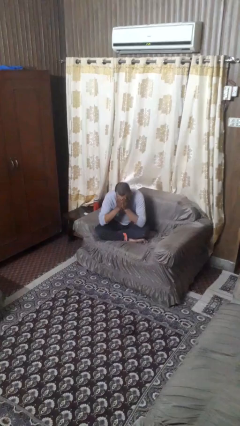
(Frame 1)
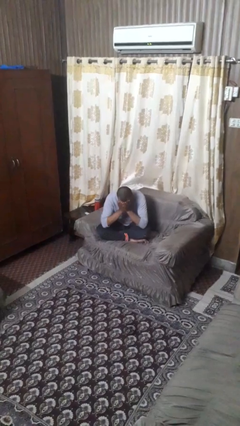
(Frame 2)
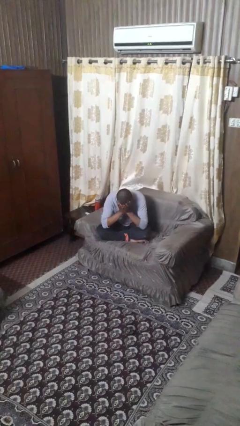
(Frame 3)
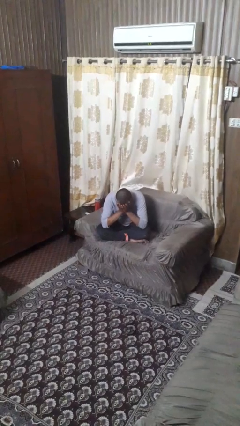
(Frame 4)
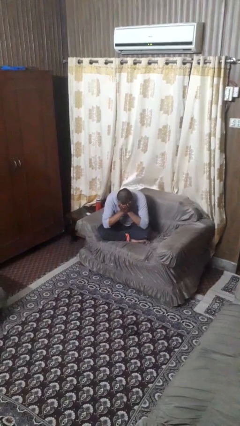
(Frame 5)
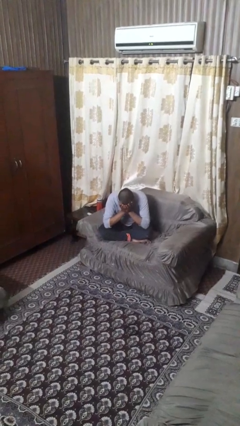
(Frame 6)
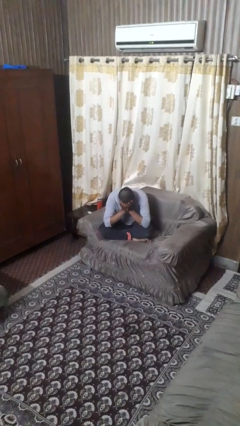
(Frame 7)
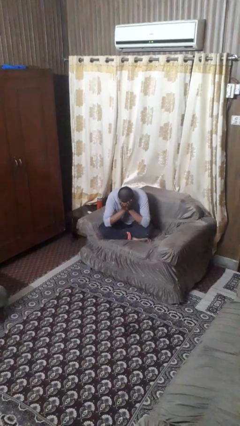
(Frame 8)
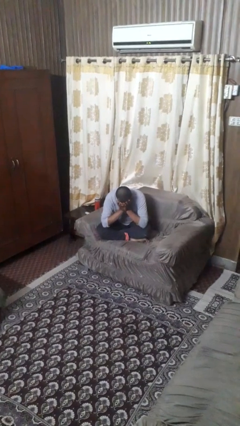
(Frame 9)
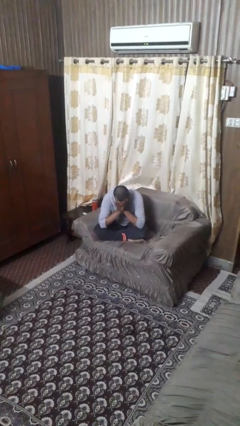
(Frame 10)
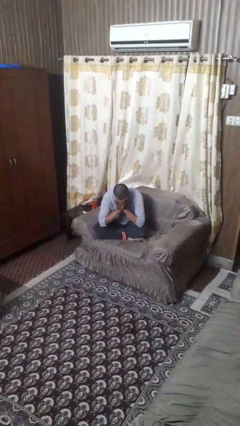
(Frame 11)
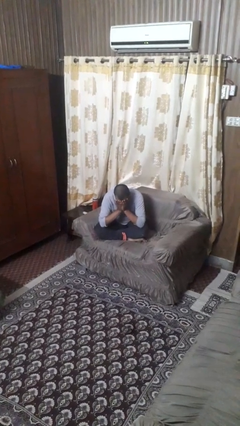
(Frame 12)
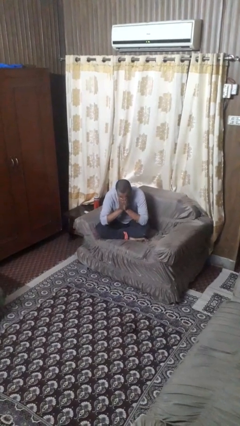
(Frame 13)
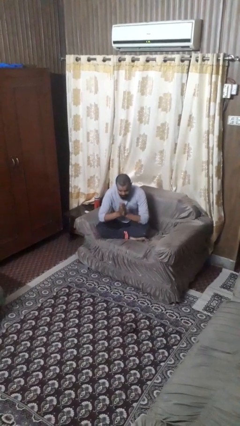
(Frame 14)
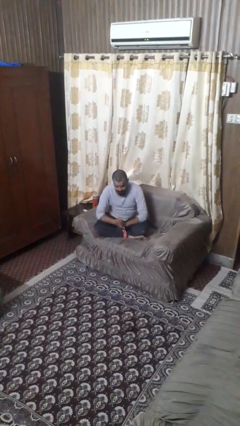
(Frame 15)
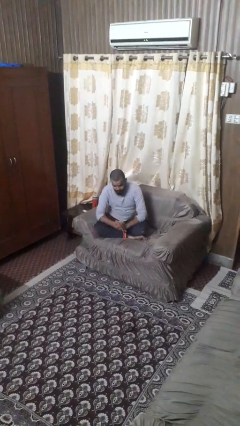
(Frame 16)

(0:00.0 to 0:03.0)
person covers face with hands

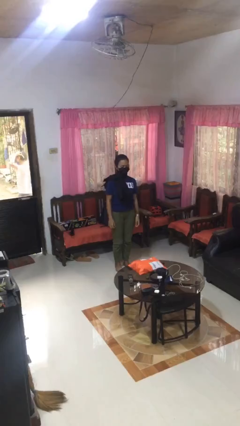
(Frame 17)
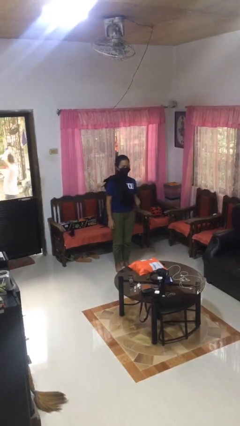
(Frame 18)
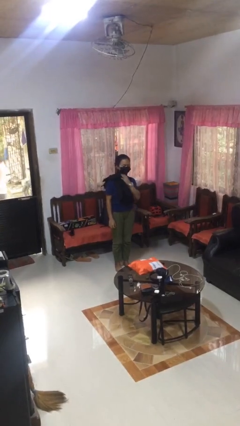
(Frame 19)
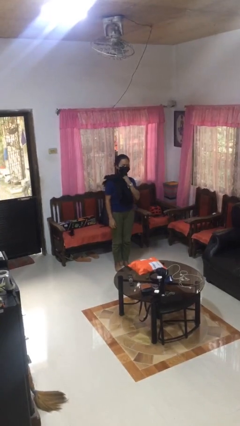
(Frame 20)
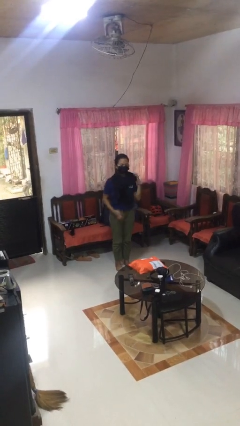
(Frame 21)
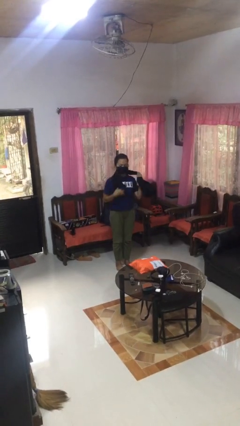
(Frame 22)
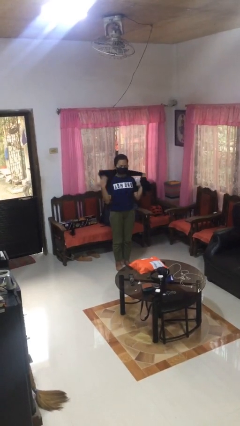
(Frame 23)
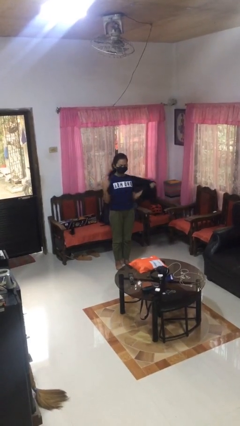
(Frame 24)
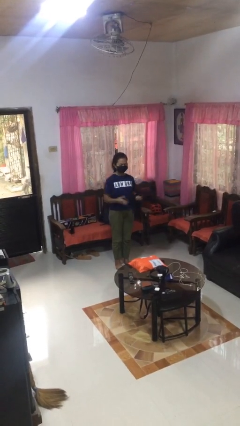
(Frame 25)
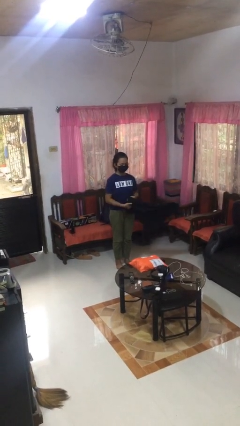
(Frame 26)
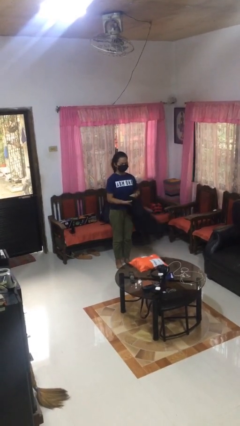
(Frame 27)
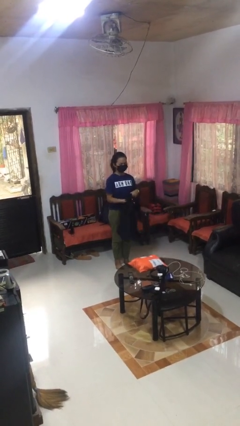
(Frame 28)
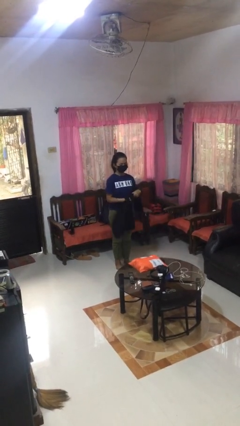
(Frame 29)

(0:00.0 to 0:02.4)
person takes off scarf

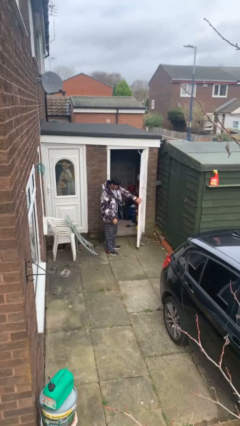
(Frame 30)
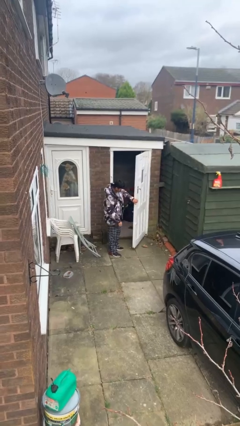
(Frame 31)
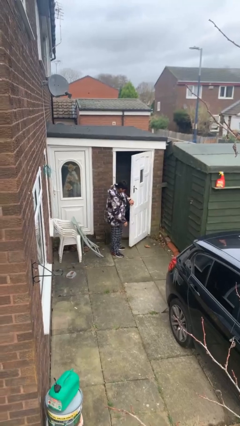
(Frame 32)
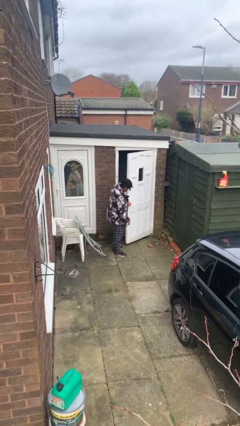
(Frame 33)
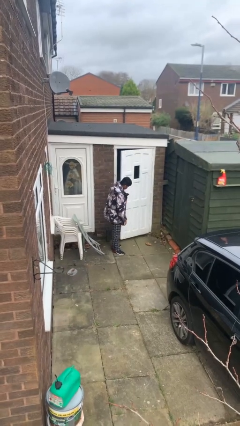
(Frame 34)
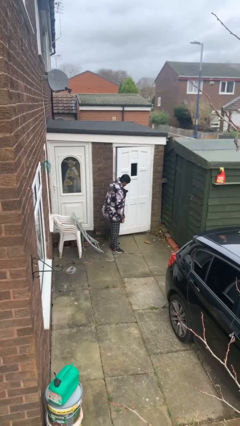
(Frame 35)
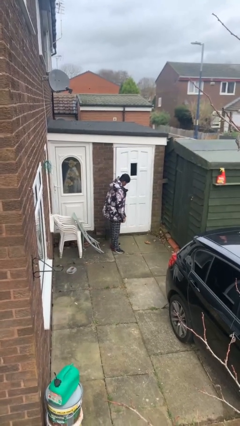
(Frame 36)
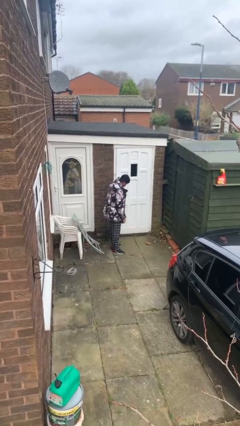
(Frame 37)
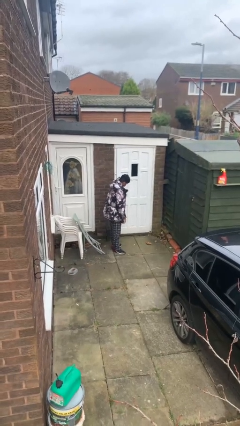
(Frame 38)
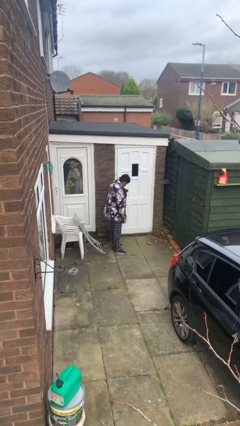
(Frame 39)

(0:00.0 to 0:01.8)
person closes facility door

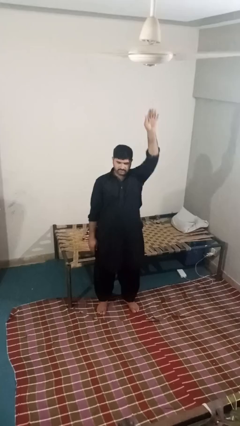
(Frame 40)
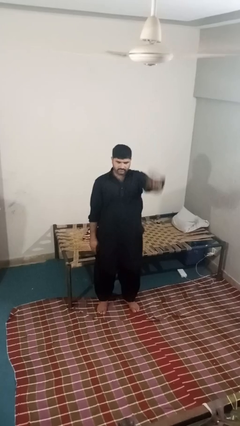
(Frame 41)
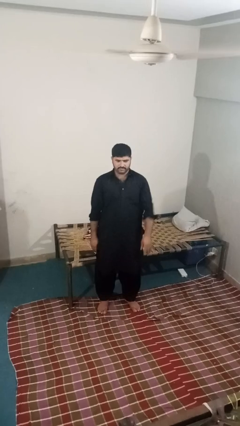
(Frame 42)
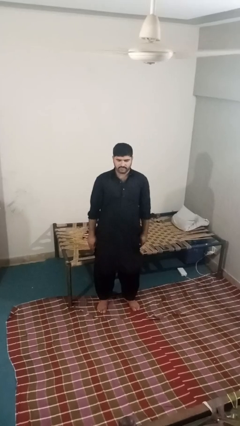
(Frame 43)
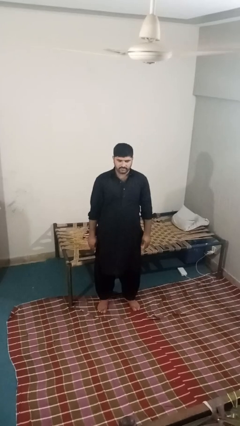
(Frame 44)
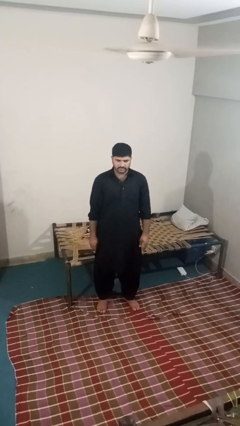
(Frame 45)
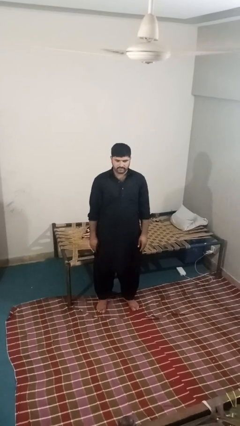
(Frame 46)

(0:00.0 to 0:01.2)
person gestures lower hand

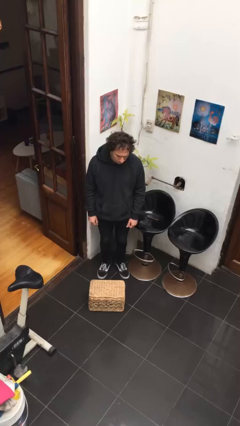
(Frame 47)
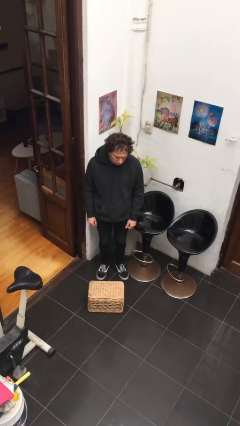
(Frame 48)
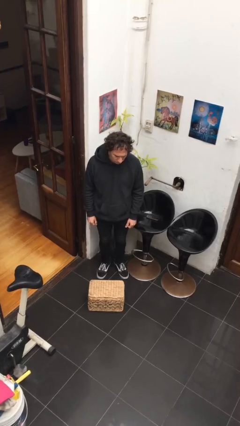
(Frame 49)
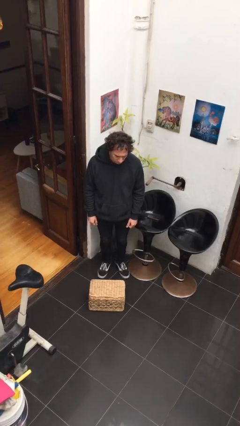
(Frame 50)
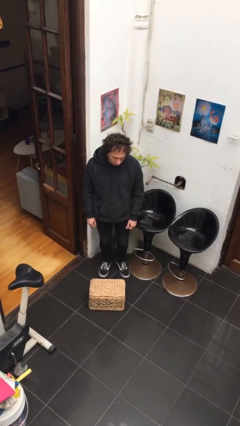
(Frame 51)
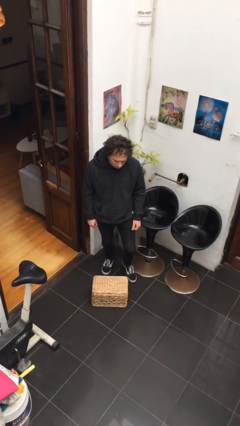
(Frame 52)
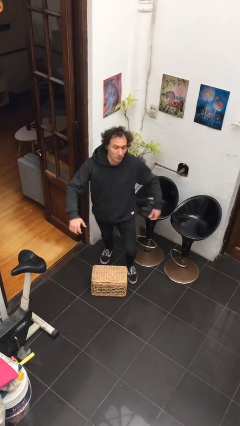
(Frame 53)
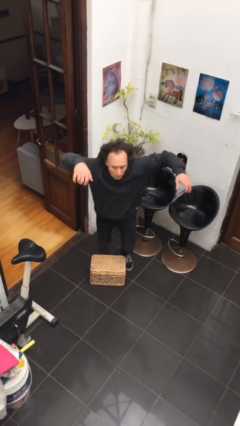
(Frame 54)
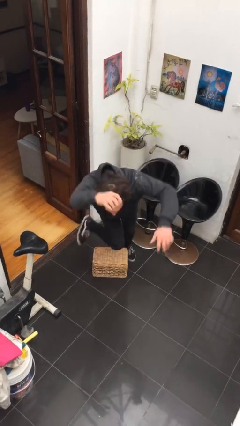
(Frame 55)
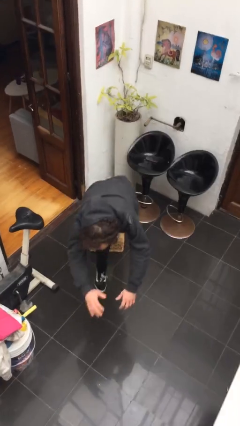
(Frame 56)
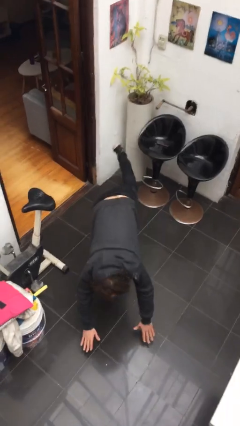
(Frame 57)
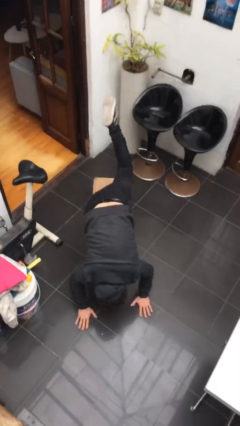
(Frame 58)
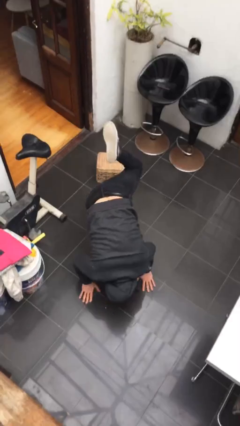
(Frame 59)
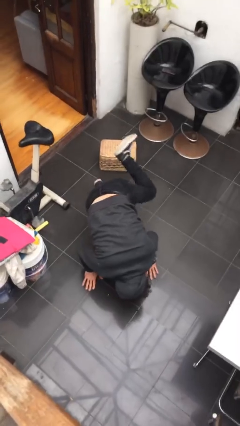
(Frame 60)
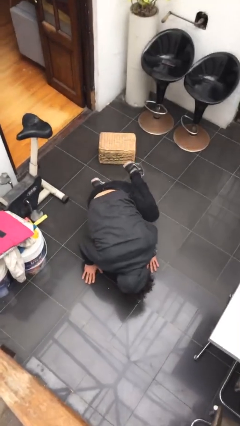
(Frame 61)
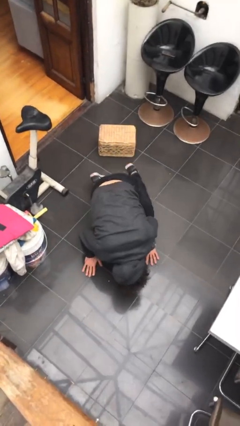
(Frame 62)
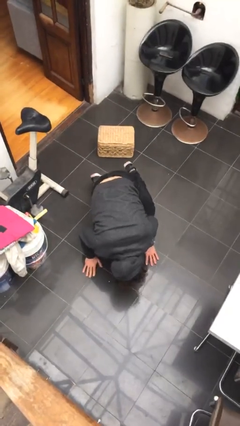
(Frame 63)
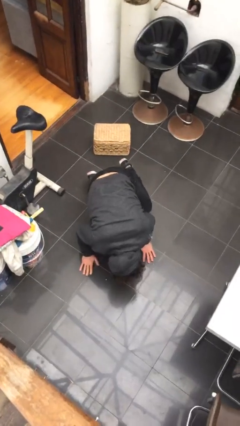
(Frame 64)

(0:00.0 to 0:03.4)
person trips on object on floor

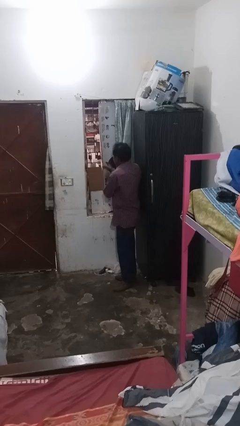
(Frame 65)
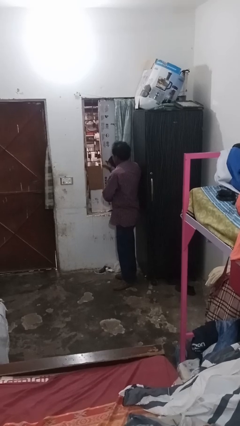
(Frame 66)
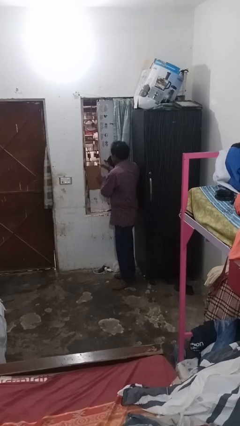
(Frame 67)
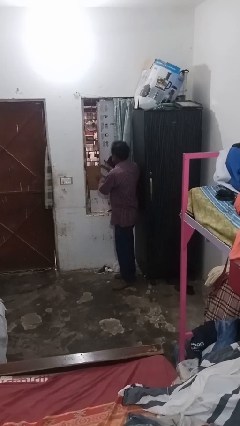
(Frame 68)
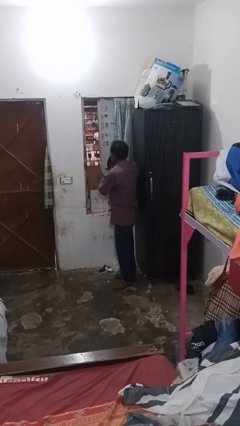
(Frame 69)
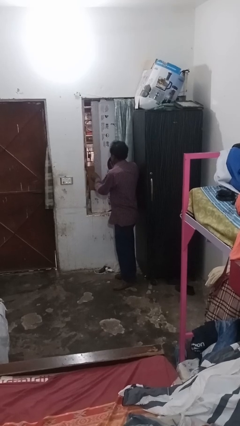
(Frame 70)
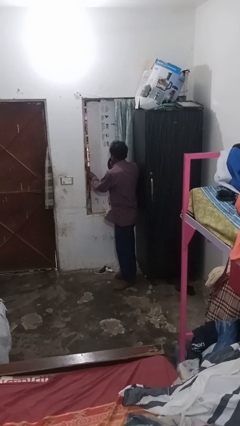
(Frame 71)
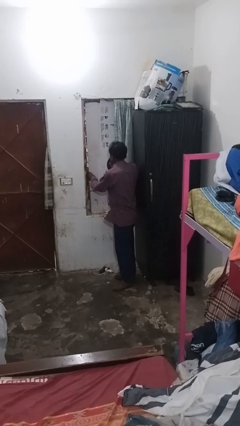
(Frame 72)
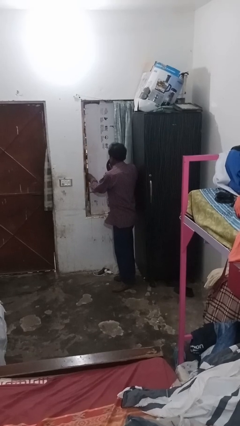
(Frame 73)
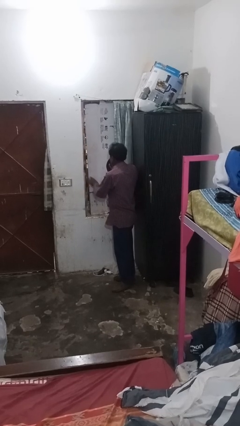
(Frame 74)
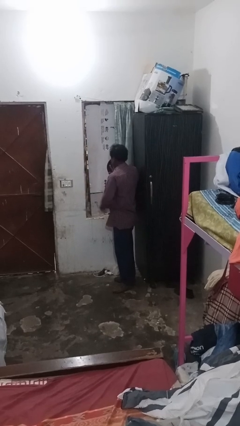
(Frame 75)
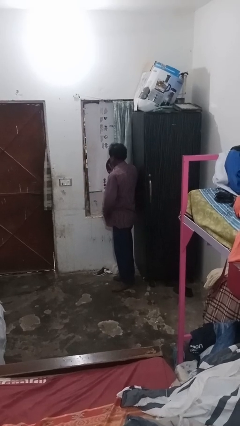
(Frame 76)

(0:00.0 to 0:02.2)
person closes home window

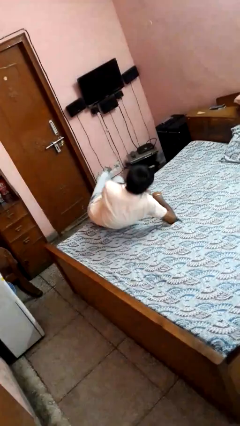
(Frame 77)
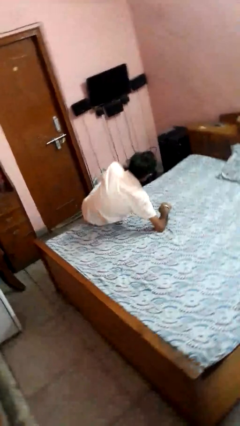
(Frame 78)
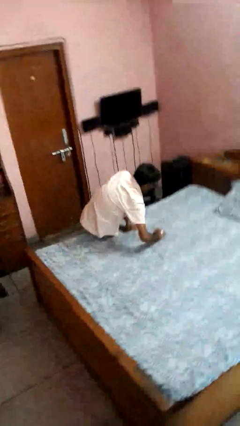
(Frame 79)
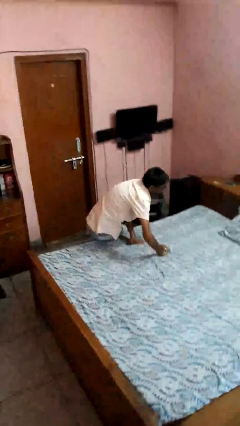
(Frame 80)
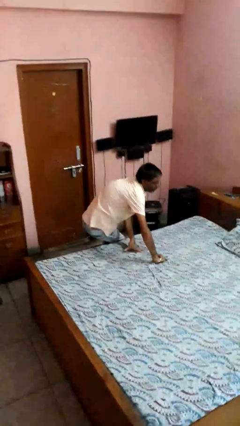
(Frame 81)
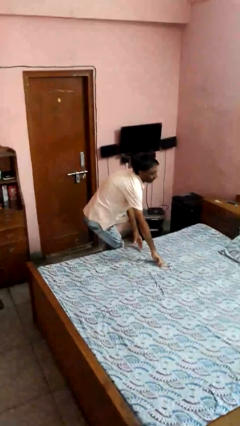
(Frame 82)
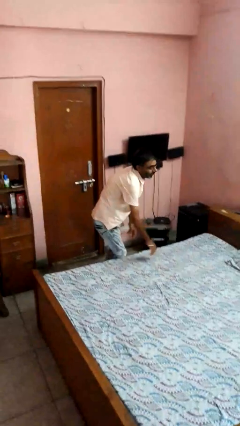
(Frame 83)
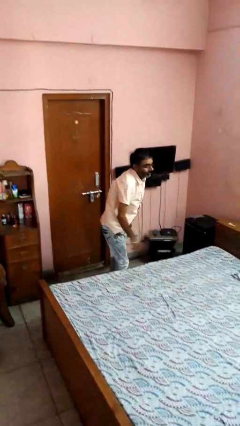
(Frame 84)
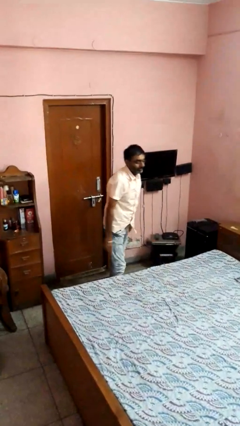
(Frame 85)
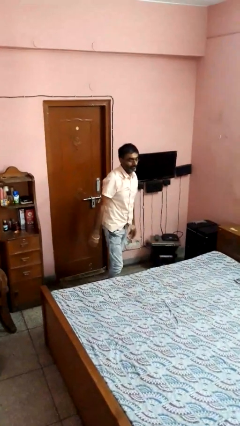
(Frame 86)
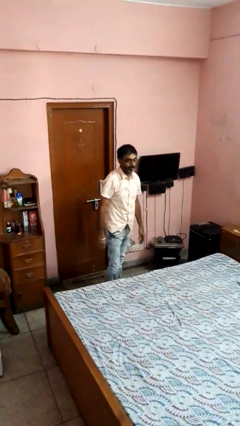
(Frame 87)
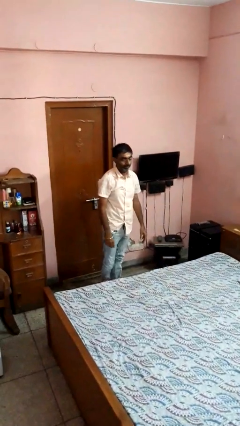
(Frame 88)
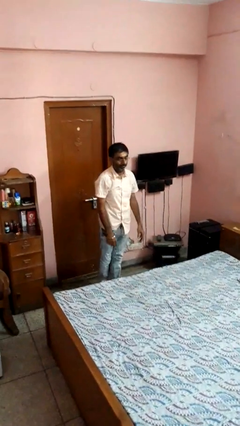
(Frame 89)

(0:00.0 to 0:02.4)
person stands up

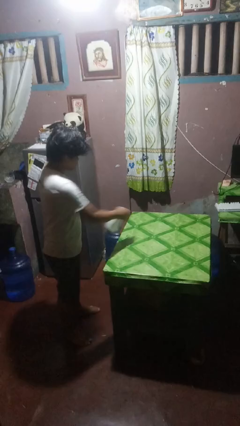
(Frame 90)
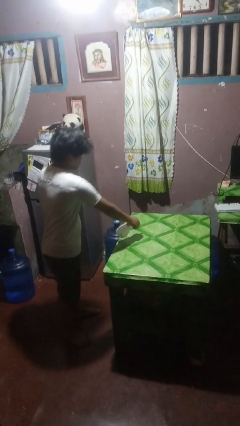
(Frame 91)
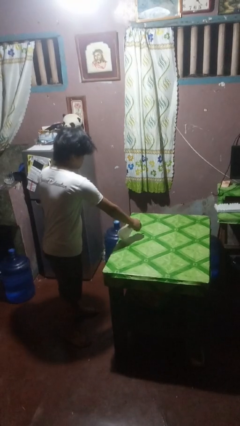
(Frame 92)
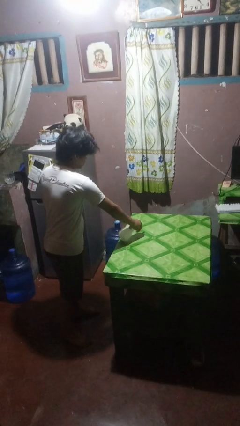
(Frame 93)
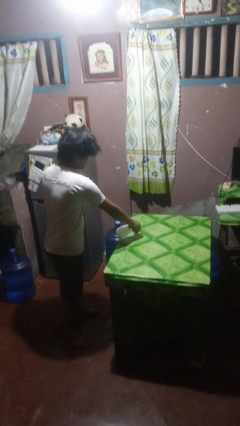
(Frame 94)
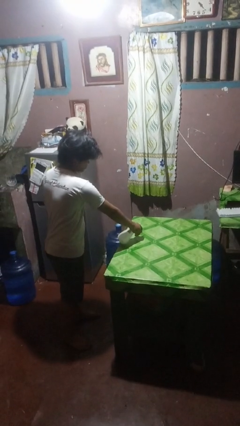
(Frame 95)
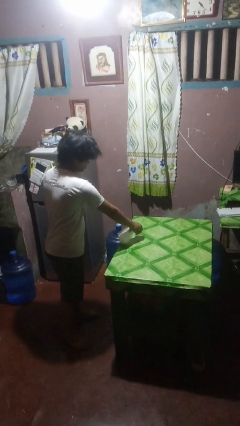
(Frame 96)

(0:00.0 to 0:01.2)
person sprays from bottle
